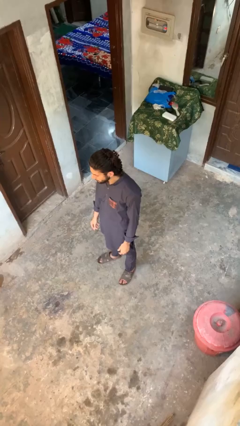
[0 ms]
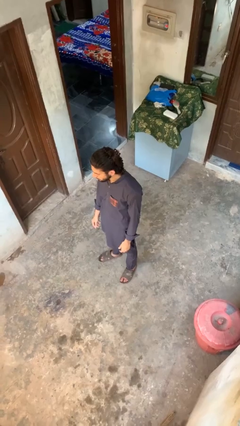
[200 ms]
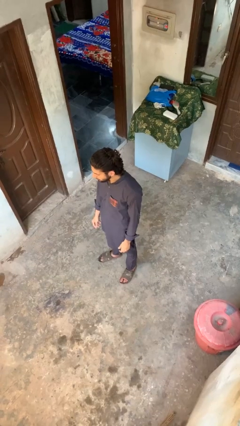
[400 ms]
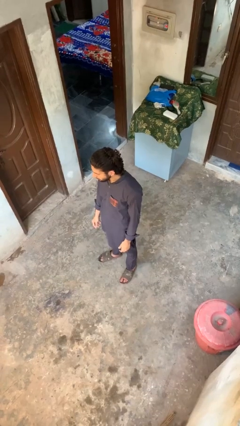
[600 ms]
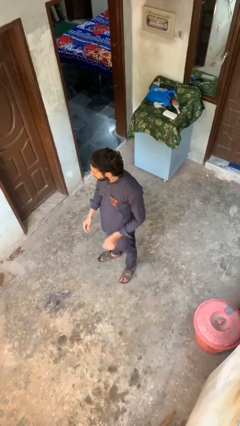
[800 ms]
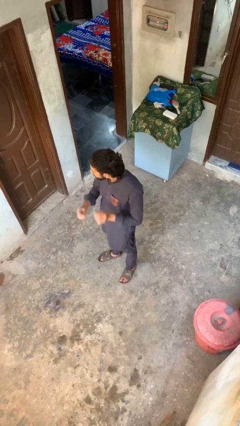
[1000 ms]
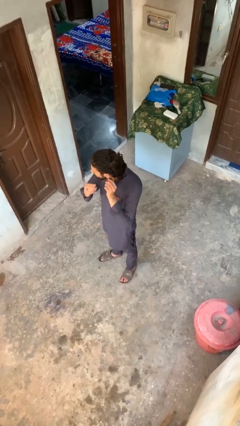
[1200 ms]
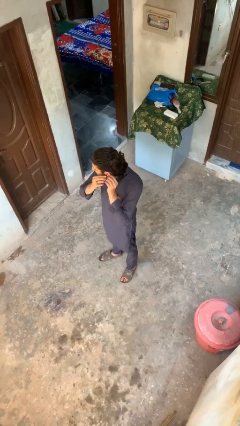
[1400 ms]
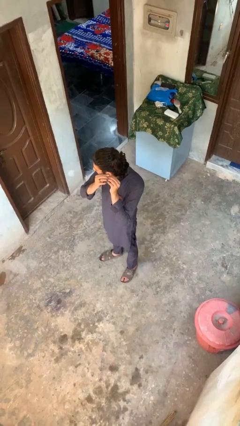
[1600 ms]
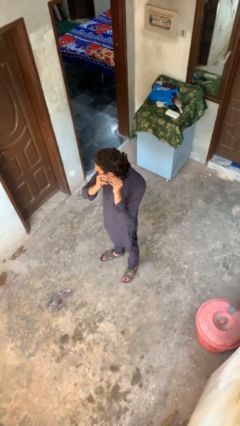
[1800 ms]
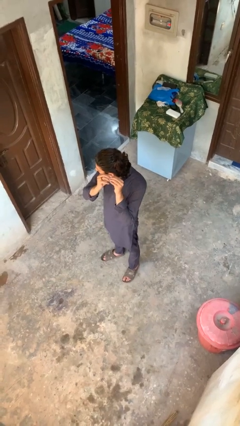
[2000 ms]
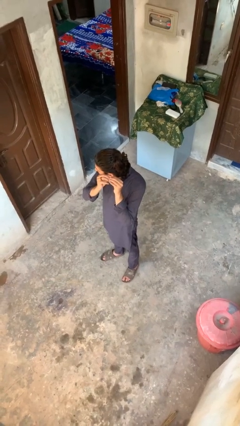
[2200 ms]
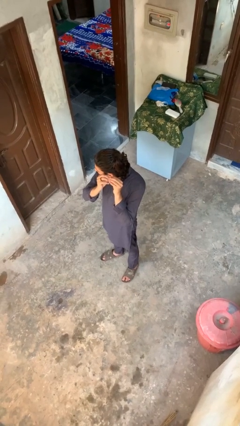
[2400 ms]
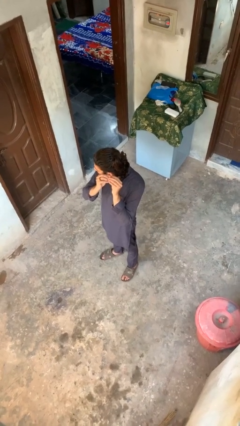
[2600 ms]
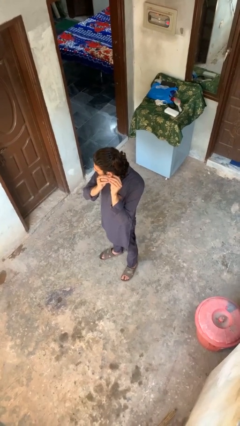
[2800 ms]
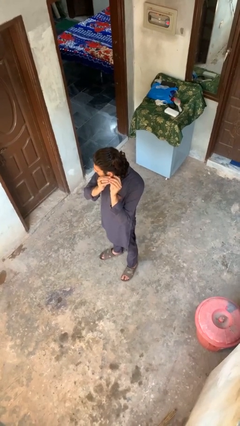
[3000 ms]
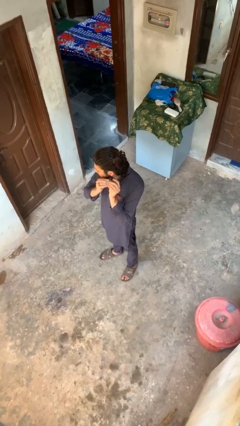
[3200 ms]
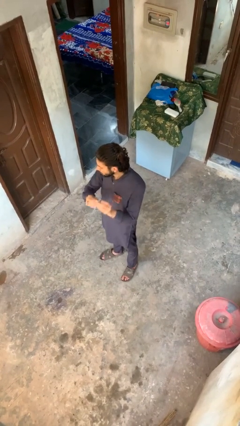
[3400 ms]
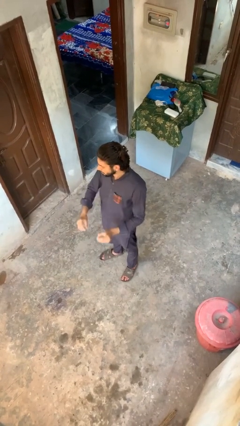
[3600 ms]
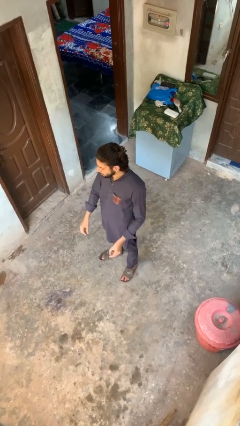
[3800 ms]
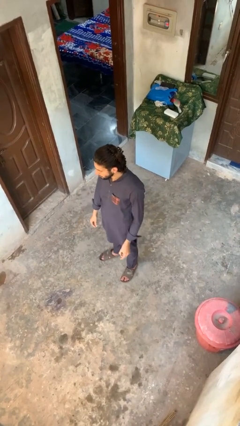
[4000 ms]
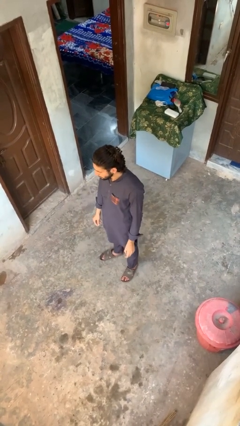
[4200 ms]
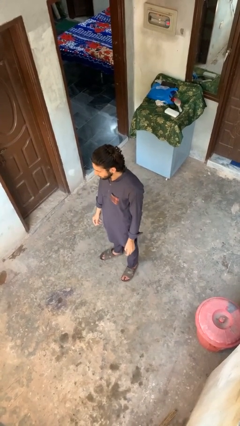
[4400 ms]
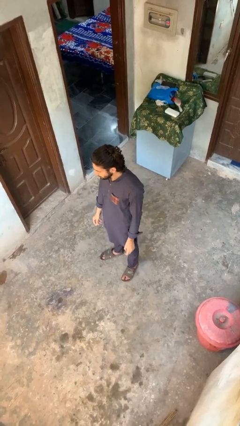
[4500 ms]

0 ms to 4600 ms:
person takes off earrings

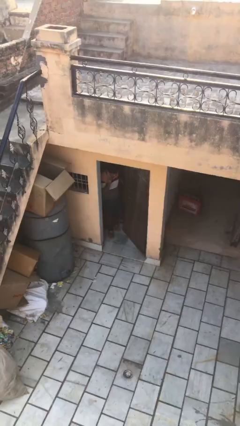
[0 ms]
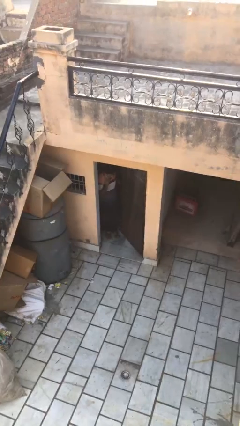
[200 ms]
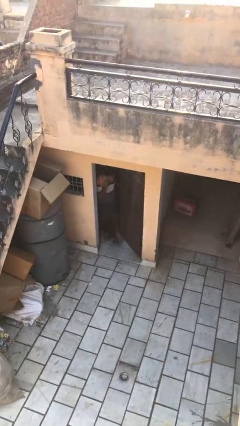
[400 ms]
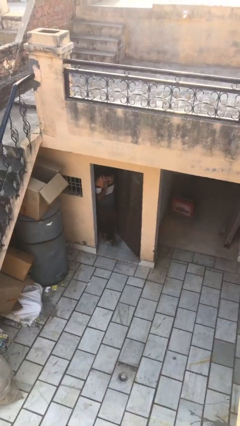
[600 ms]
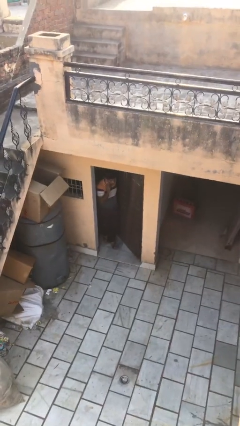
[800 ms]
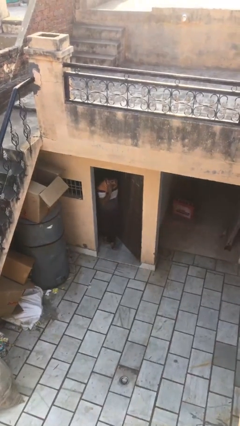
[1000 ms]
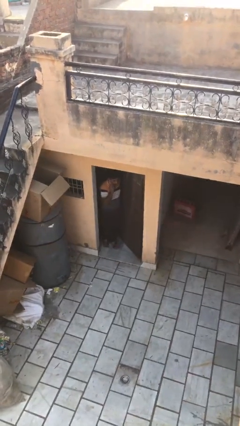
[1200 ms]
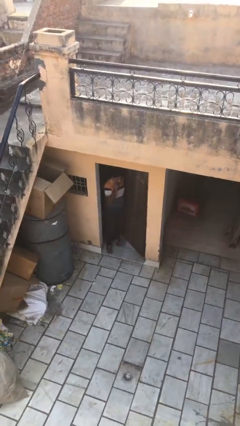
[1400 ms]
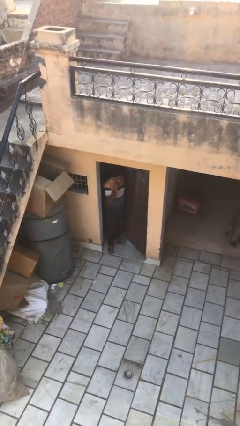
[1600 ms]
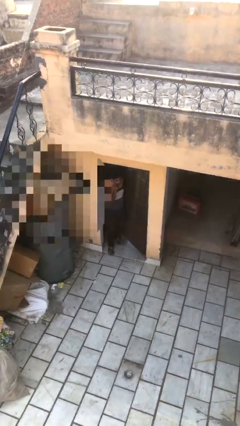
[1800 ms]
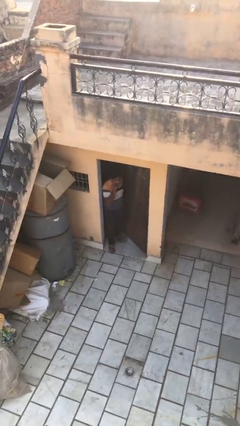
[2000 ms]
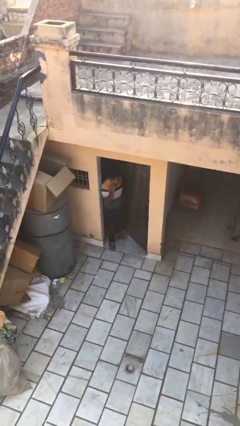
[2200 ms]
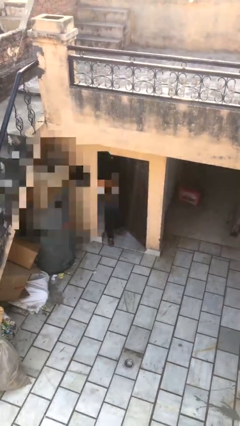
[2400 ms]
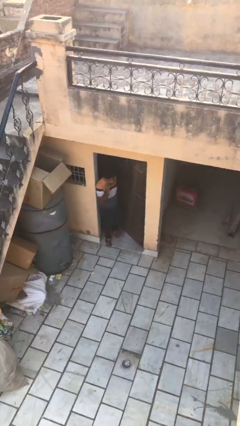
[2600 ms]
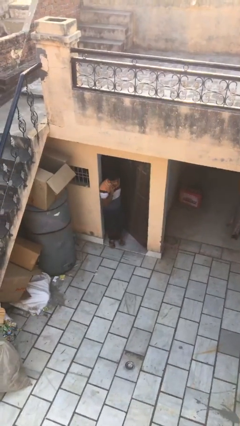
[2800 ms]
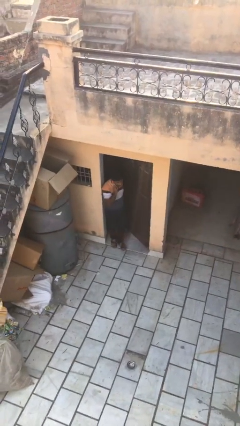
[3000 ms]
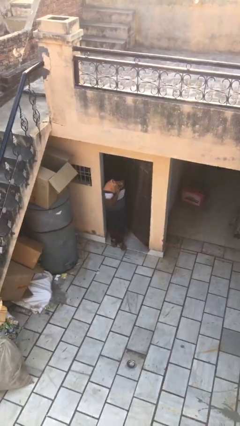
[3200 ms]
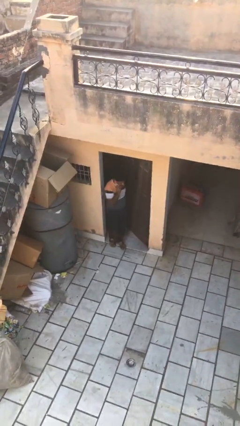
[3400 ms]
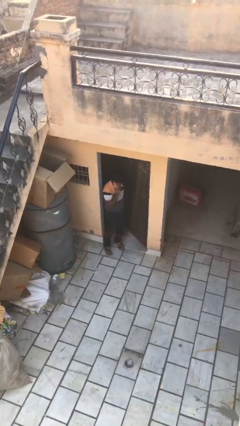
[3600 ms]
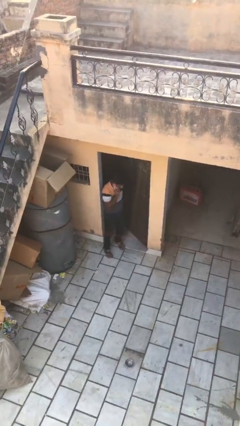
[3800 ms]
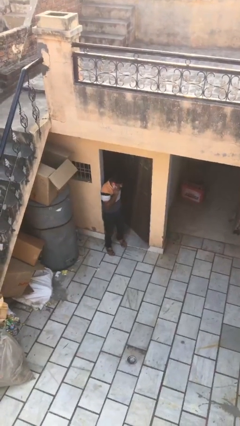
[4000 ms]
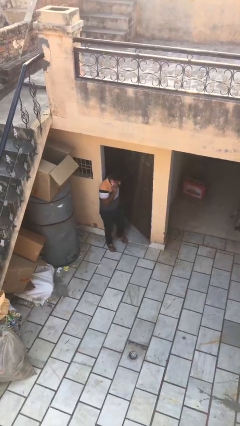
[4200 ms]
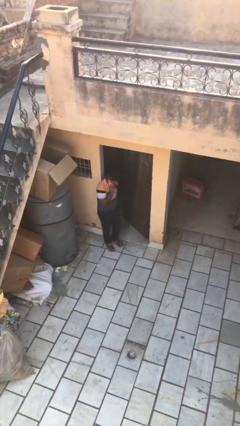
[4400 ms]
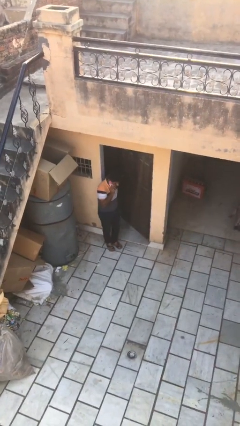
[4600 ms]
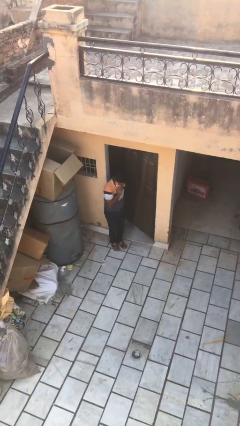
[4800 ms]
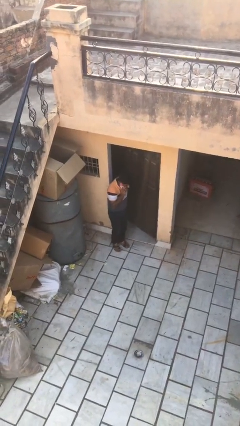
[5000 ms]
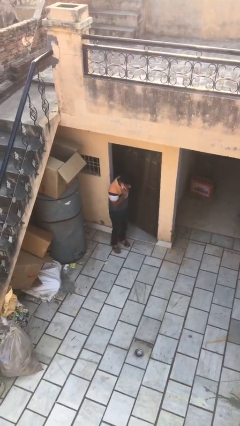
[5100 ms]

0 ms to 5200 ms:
person enters scene through structure

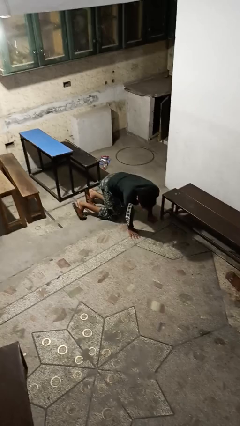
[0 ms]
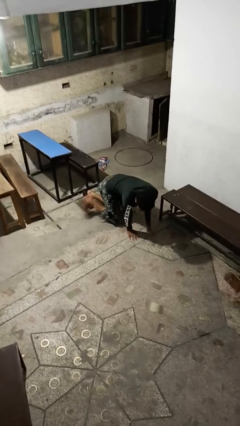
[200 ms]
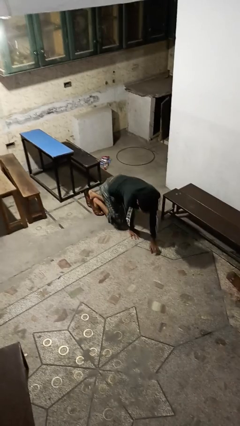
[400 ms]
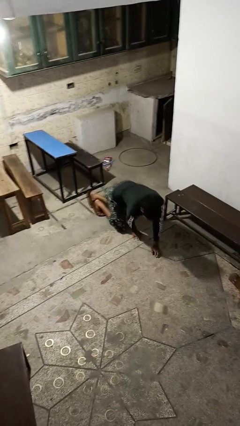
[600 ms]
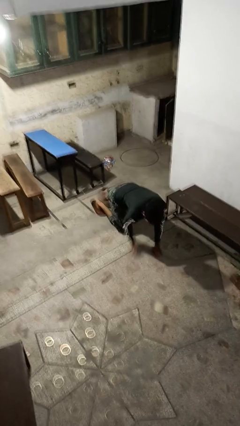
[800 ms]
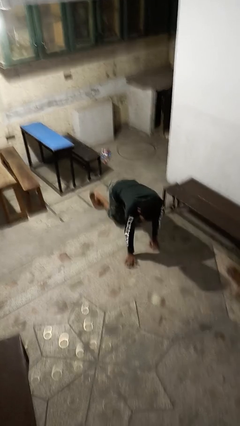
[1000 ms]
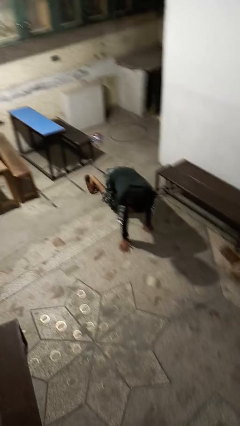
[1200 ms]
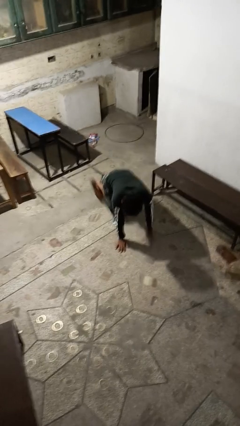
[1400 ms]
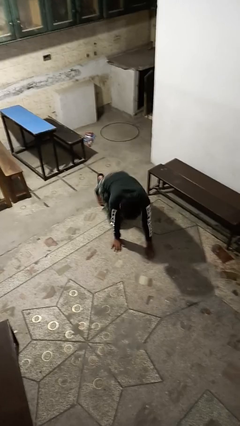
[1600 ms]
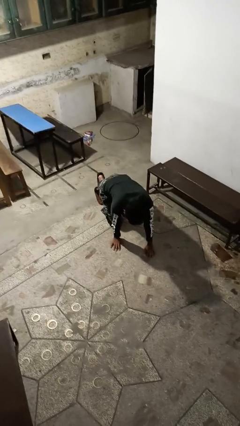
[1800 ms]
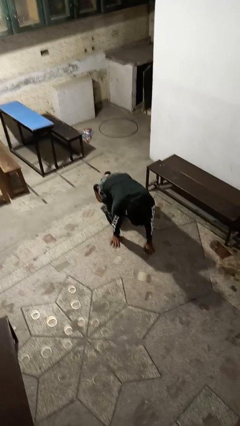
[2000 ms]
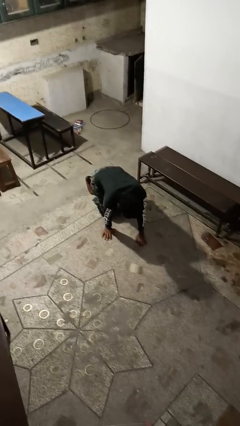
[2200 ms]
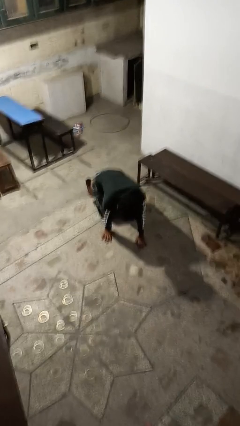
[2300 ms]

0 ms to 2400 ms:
person crawls

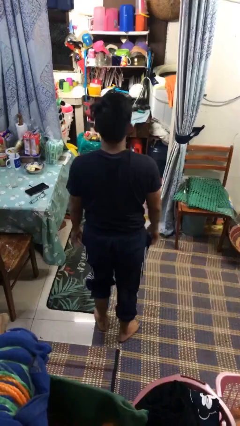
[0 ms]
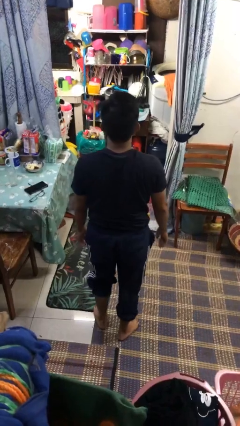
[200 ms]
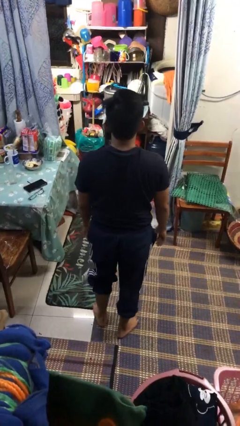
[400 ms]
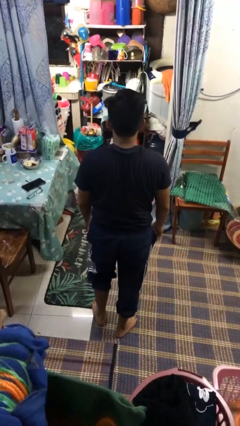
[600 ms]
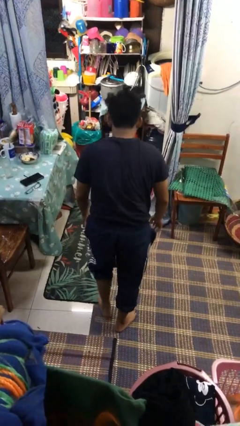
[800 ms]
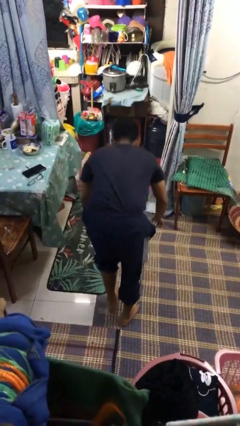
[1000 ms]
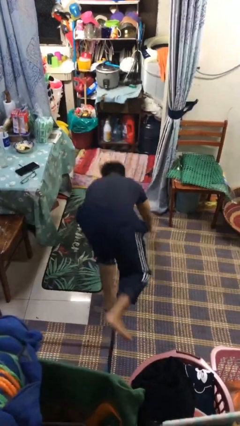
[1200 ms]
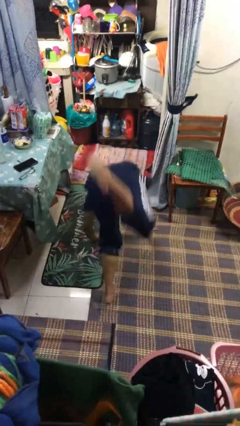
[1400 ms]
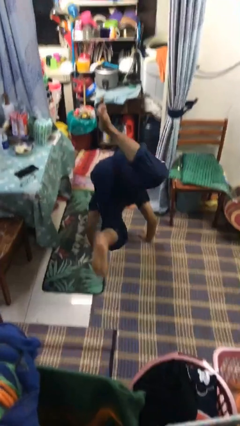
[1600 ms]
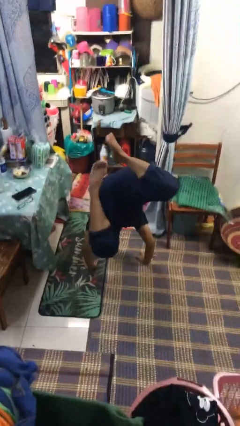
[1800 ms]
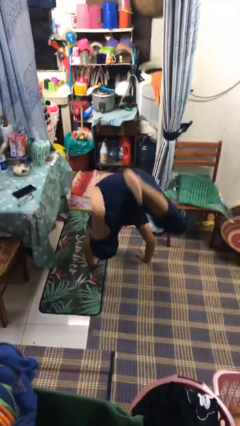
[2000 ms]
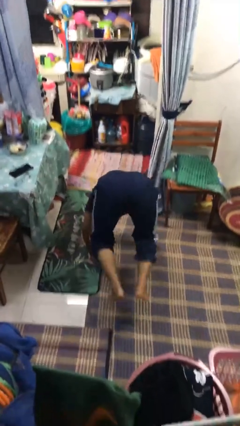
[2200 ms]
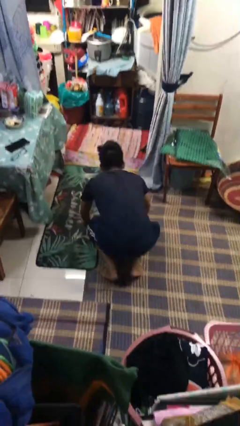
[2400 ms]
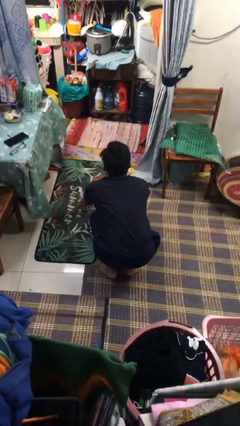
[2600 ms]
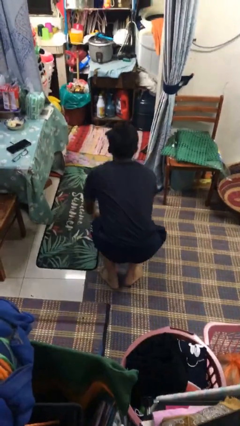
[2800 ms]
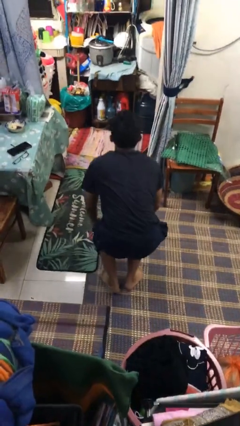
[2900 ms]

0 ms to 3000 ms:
person handstand

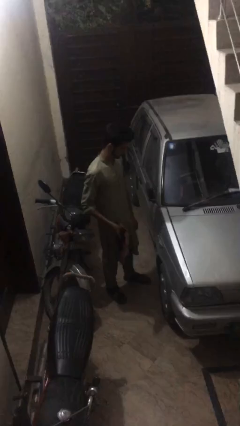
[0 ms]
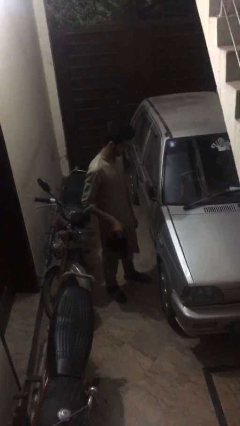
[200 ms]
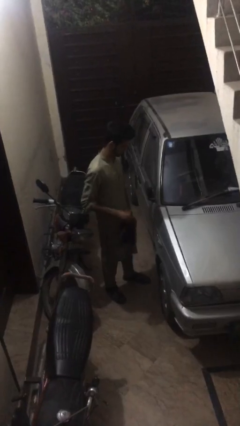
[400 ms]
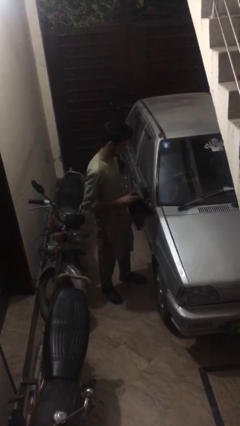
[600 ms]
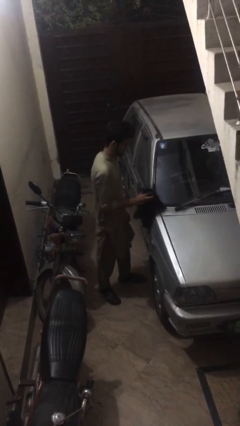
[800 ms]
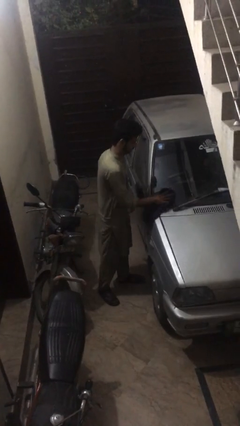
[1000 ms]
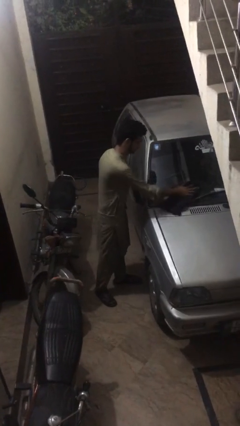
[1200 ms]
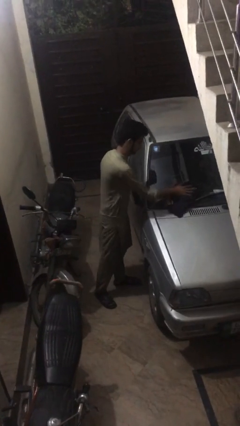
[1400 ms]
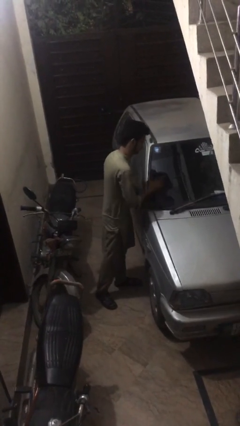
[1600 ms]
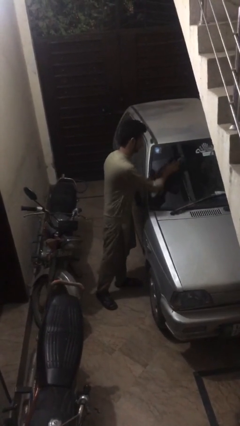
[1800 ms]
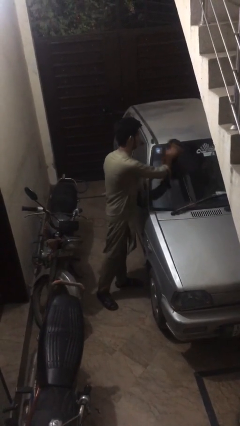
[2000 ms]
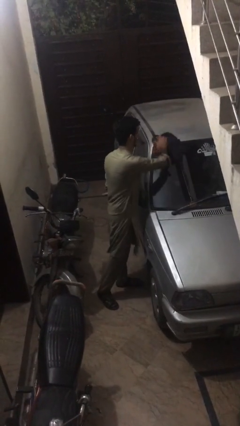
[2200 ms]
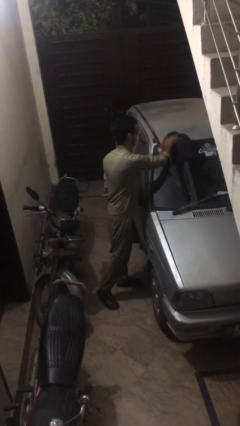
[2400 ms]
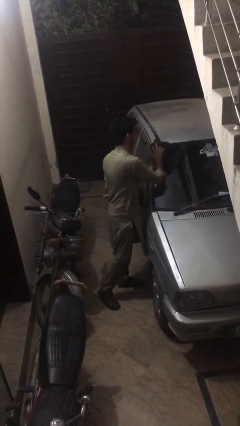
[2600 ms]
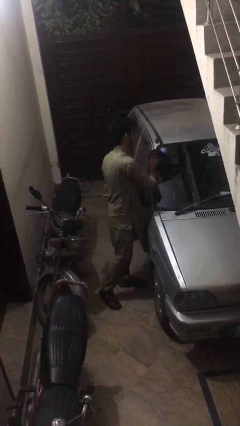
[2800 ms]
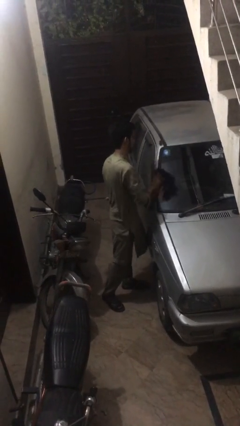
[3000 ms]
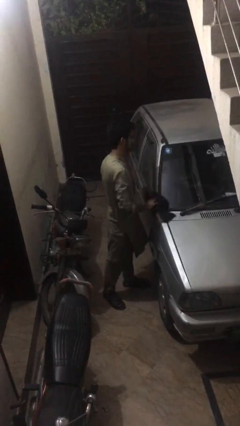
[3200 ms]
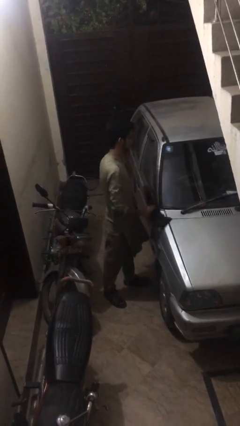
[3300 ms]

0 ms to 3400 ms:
person polishes car with rag
